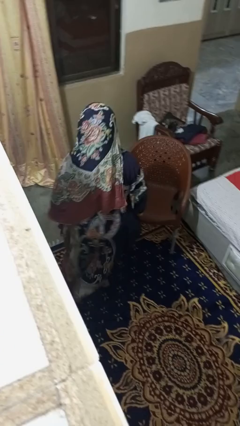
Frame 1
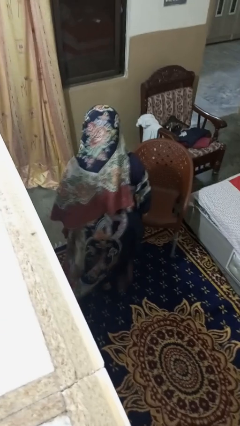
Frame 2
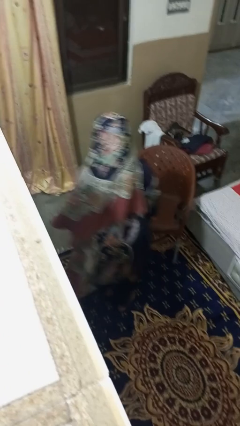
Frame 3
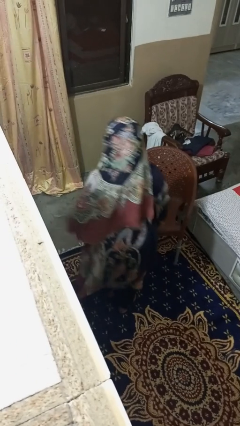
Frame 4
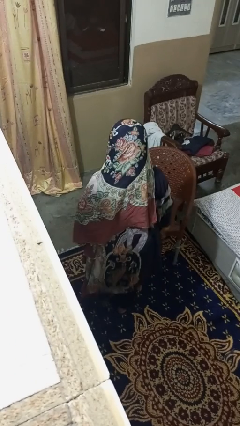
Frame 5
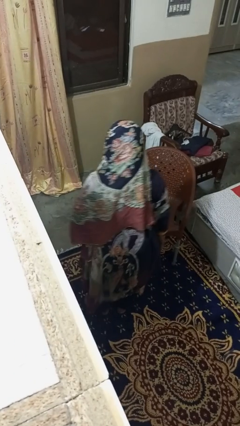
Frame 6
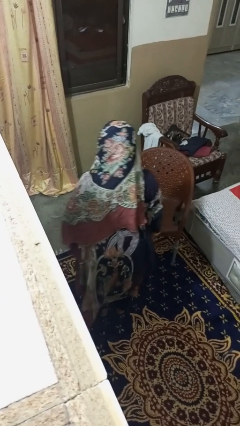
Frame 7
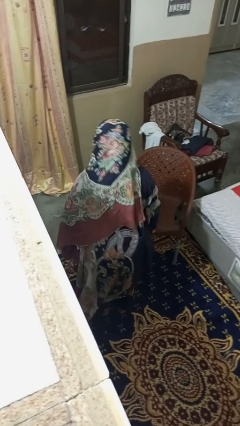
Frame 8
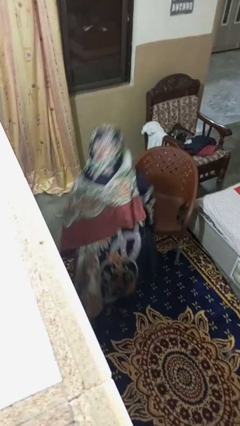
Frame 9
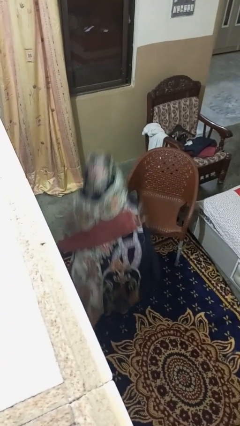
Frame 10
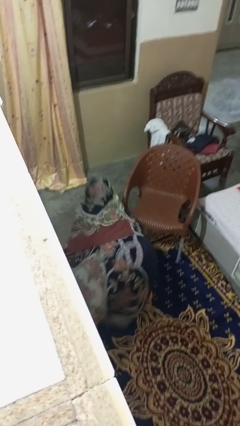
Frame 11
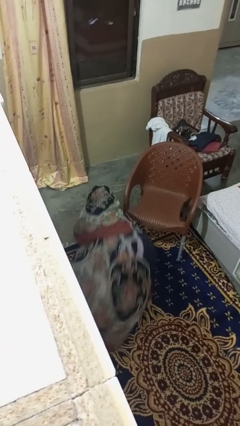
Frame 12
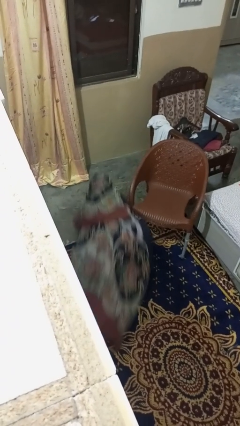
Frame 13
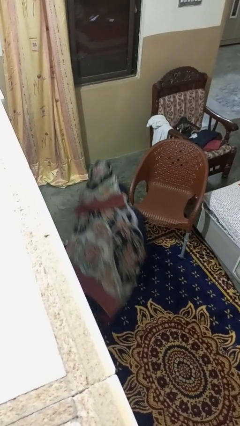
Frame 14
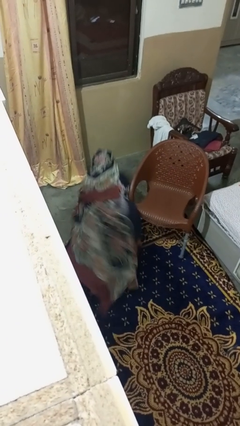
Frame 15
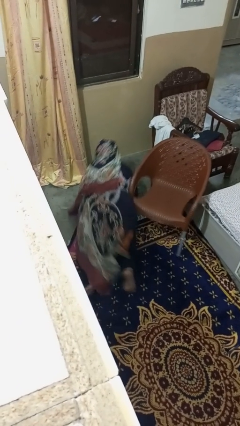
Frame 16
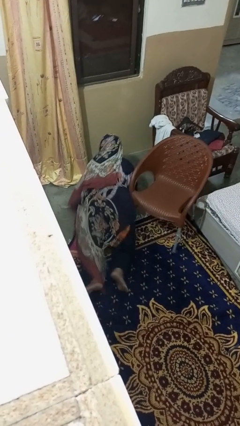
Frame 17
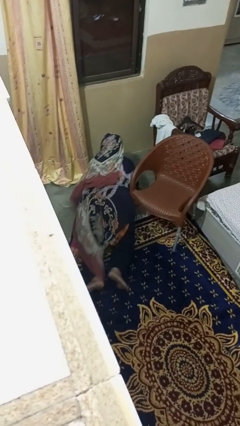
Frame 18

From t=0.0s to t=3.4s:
person lies down on floor

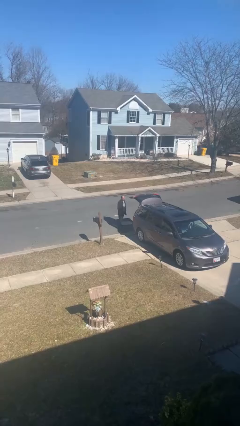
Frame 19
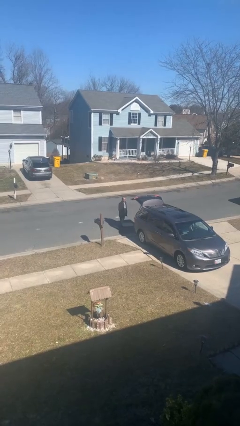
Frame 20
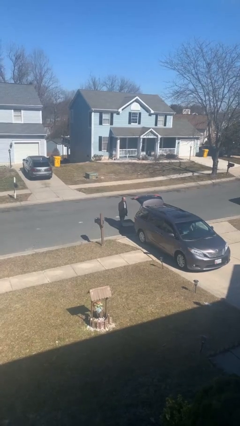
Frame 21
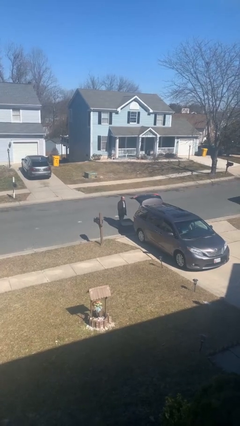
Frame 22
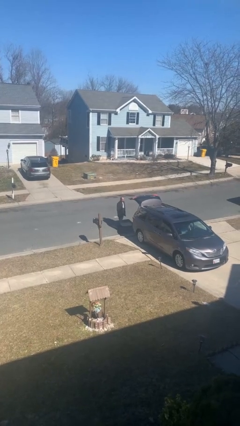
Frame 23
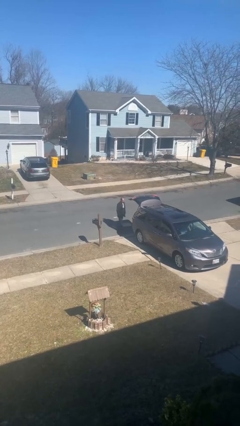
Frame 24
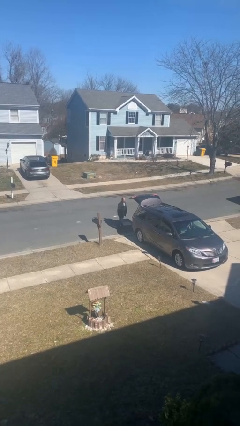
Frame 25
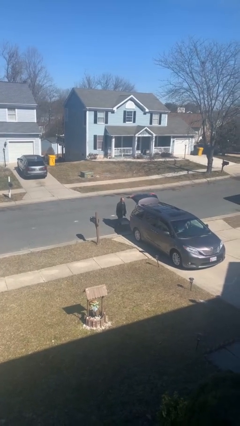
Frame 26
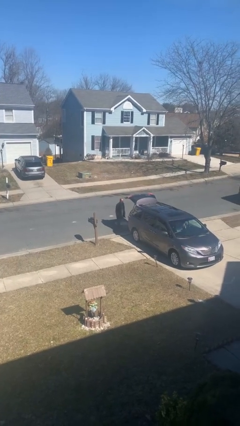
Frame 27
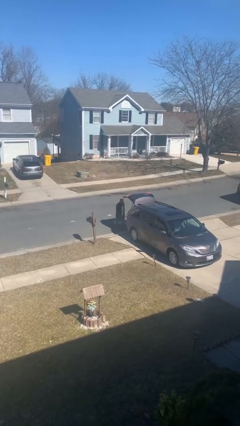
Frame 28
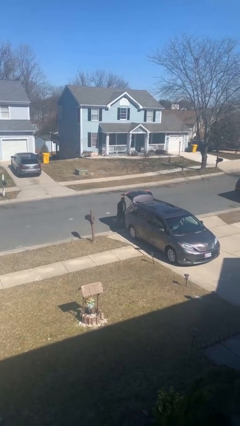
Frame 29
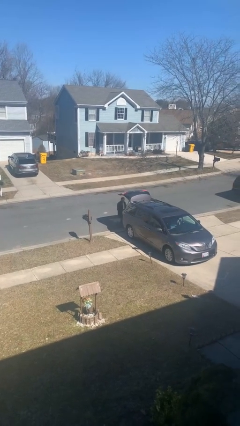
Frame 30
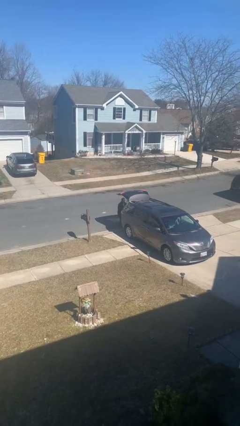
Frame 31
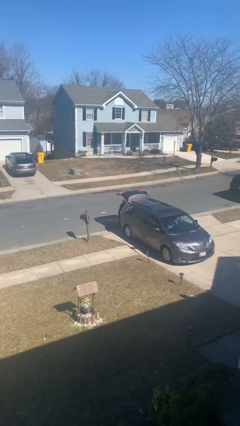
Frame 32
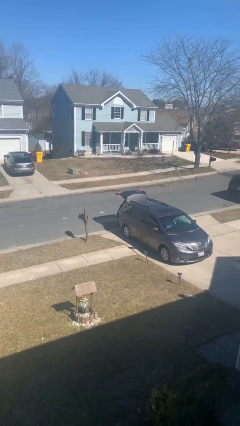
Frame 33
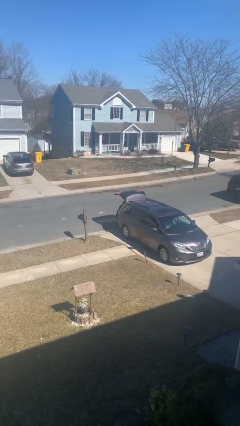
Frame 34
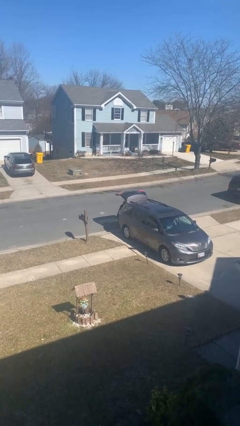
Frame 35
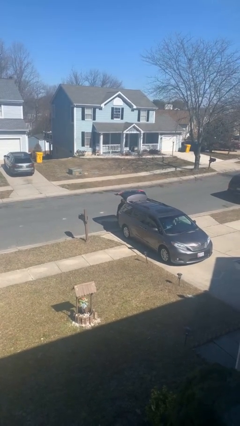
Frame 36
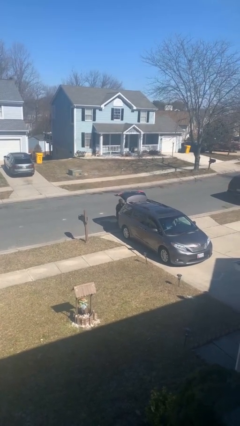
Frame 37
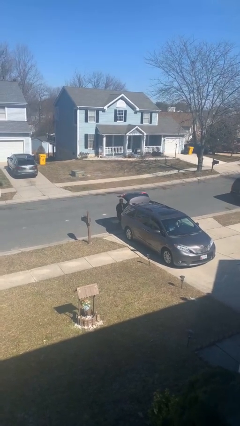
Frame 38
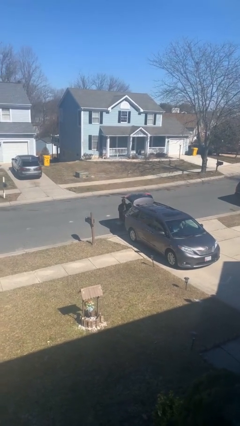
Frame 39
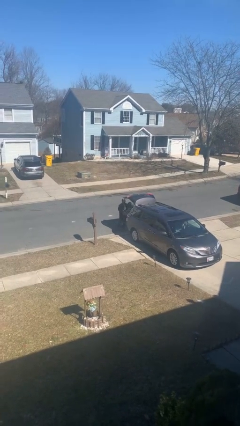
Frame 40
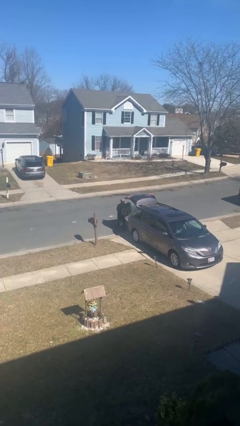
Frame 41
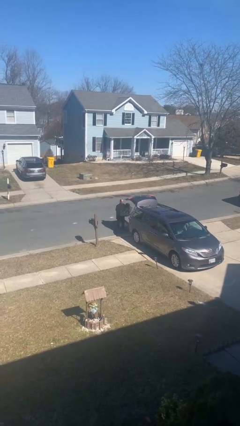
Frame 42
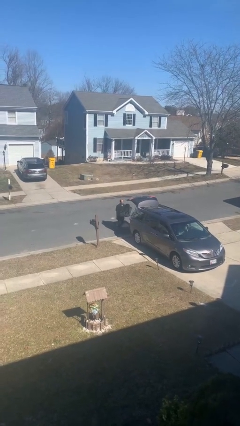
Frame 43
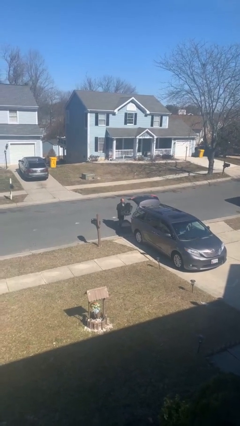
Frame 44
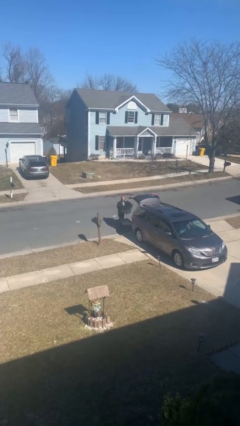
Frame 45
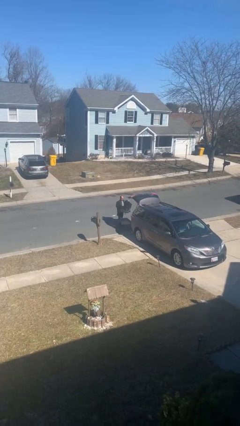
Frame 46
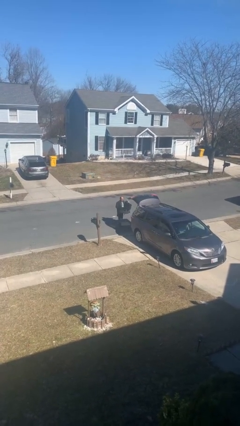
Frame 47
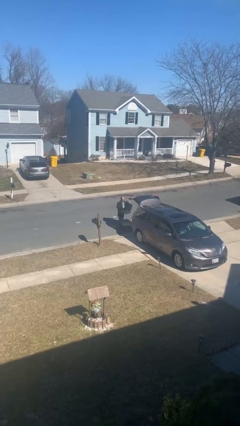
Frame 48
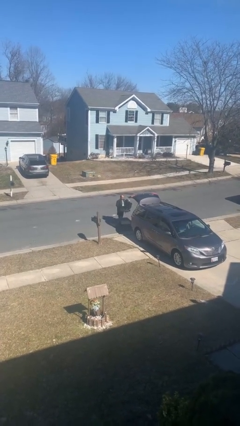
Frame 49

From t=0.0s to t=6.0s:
person unloads car

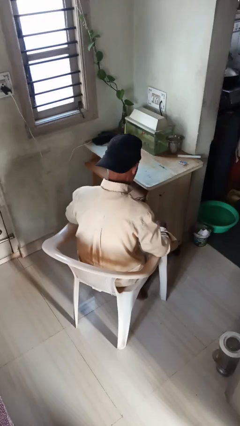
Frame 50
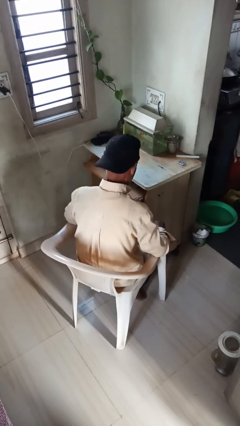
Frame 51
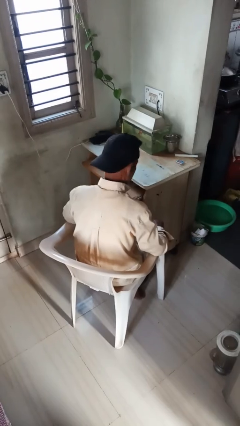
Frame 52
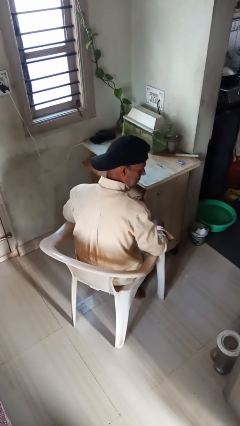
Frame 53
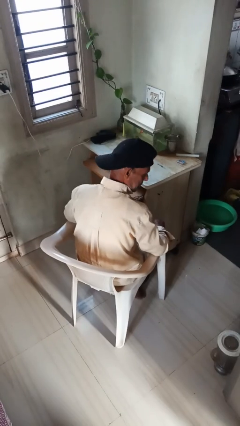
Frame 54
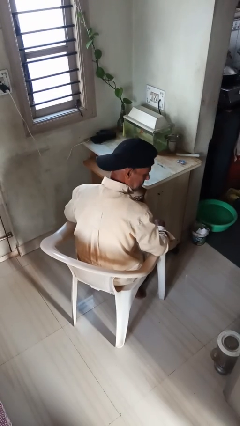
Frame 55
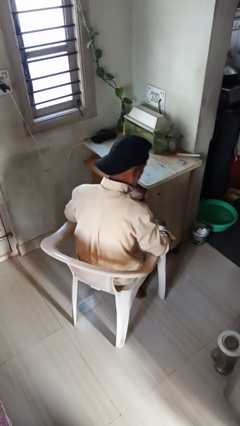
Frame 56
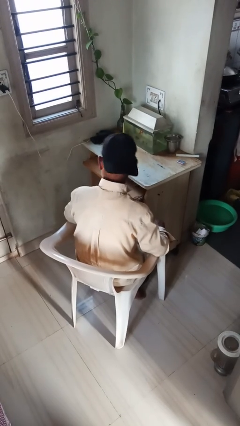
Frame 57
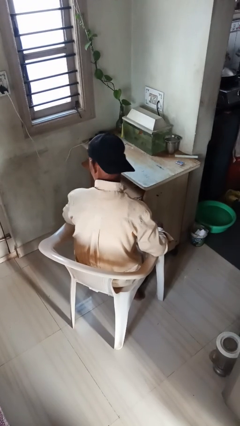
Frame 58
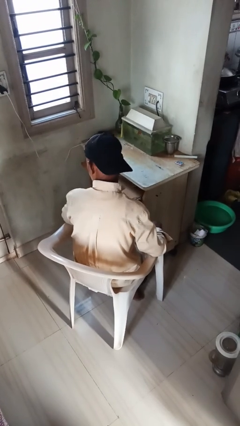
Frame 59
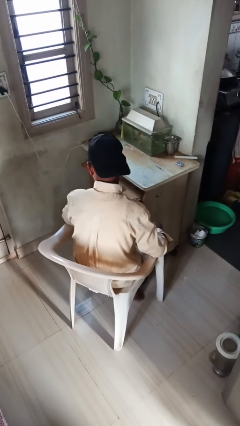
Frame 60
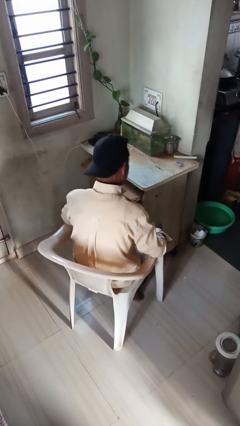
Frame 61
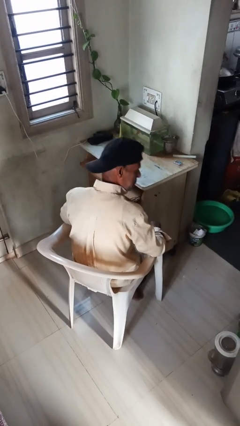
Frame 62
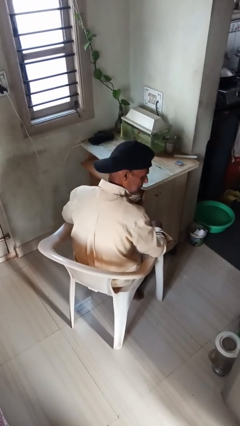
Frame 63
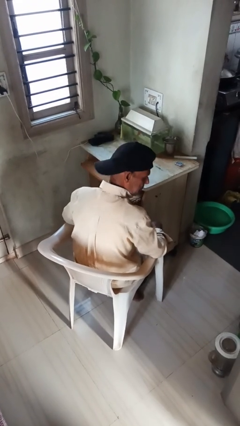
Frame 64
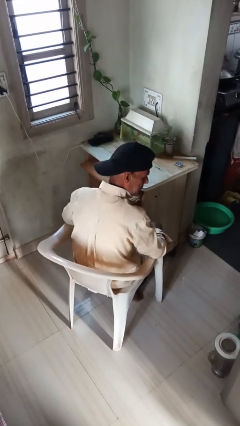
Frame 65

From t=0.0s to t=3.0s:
person shakes head

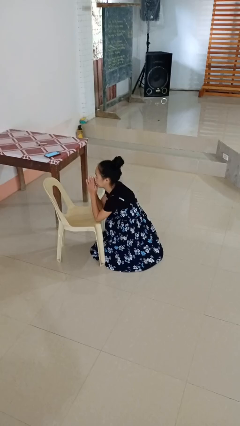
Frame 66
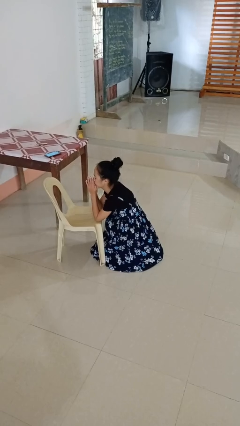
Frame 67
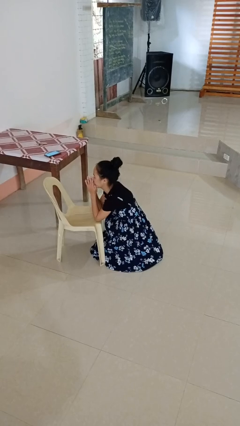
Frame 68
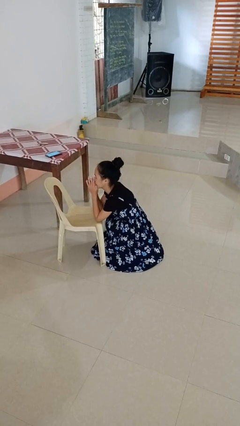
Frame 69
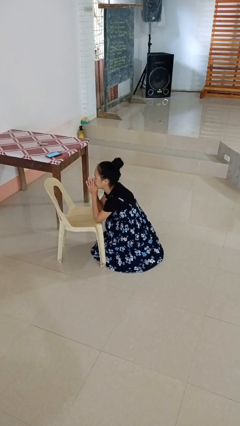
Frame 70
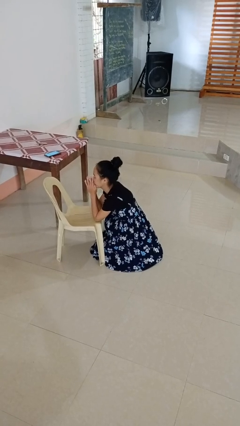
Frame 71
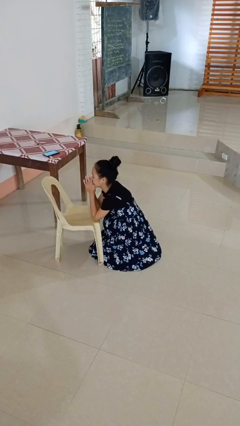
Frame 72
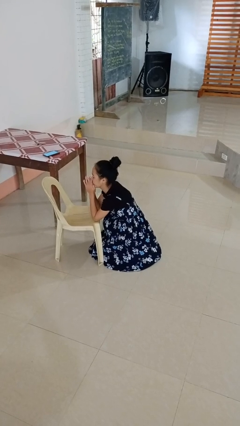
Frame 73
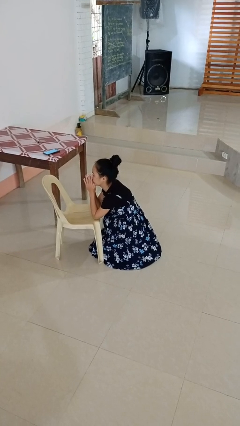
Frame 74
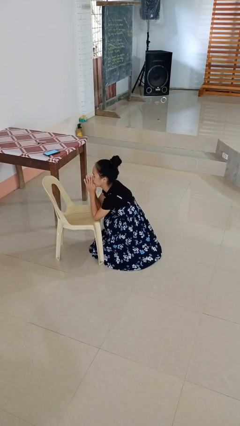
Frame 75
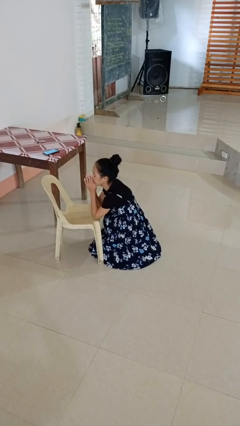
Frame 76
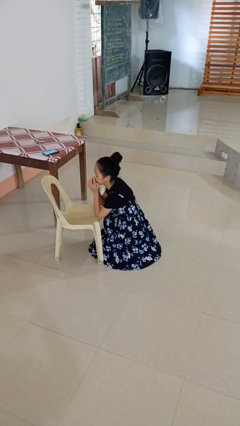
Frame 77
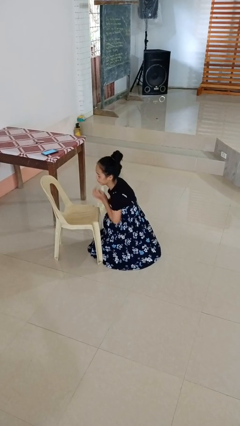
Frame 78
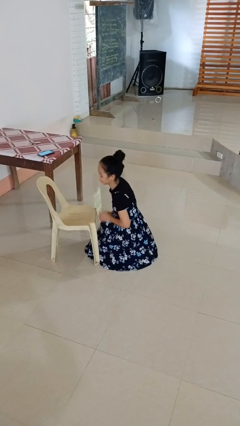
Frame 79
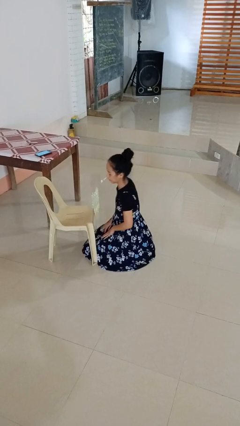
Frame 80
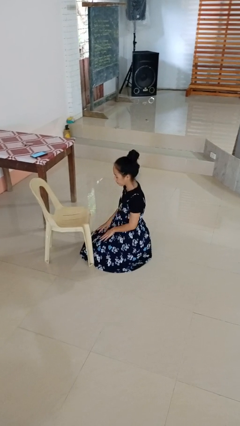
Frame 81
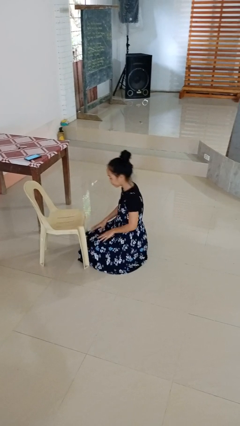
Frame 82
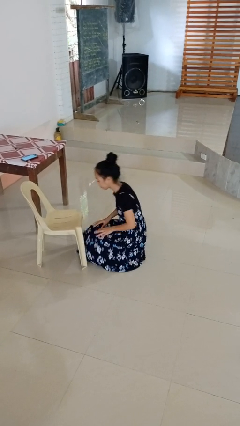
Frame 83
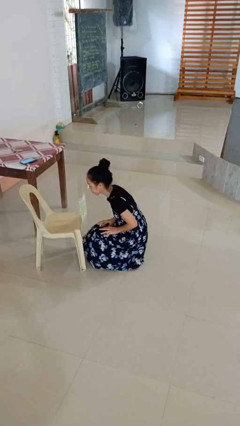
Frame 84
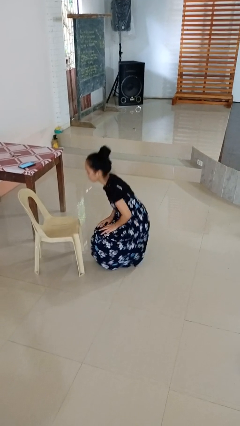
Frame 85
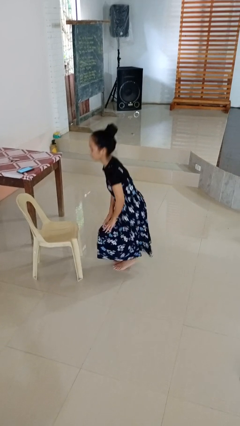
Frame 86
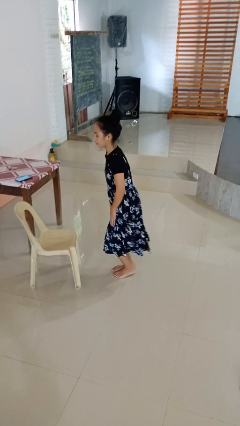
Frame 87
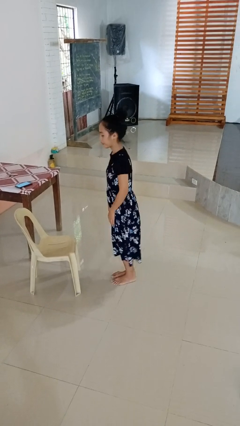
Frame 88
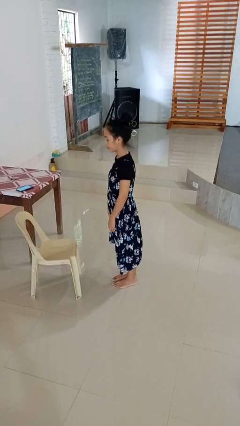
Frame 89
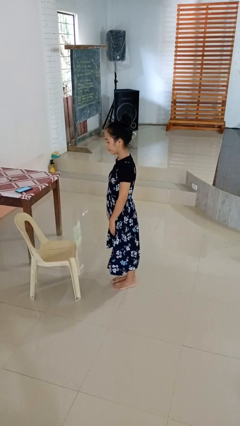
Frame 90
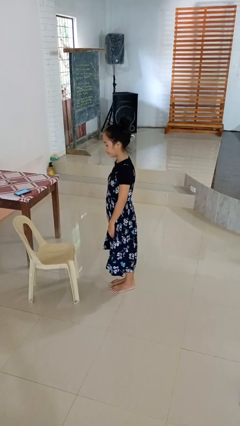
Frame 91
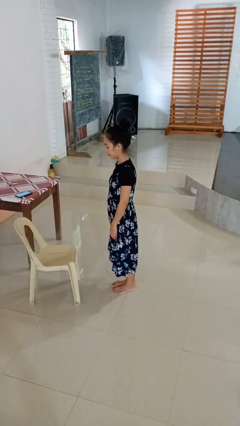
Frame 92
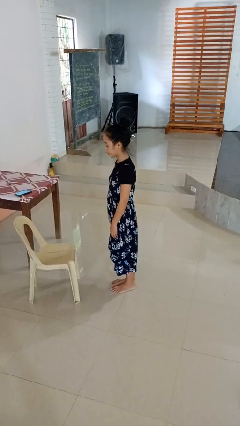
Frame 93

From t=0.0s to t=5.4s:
person prays
